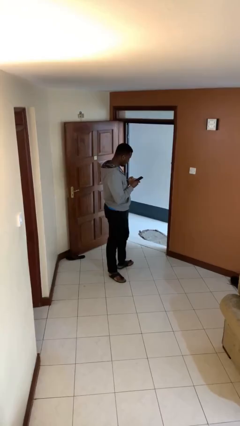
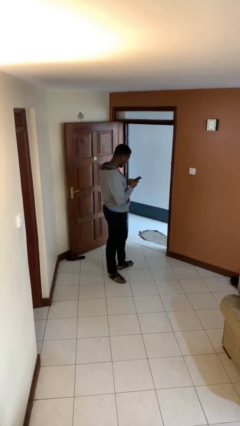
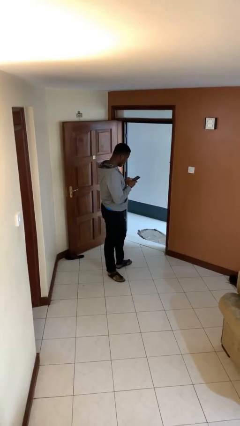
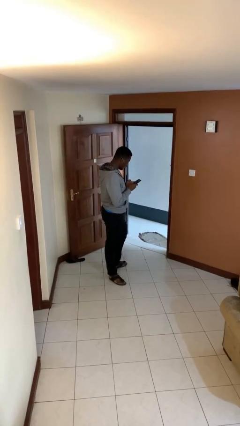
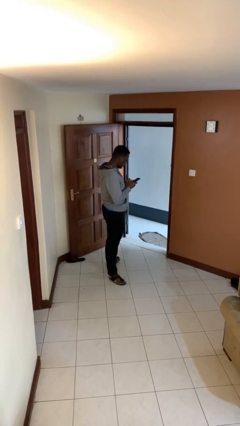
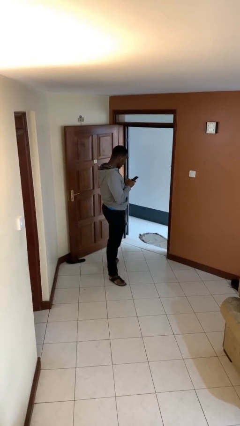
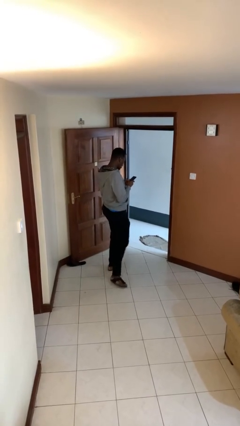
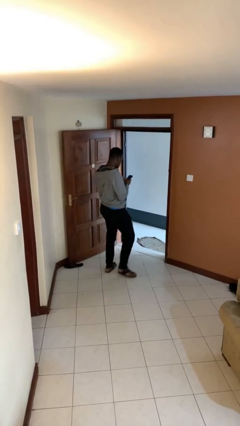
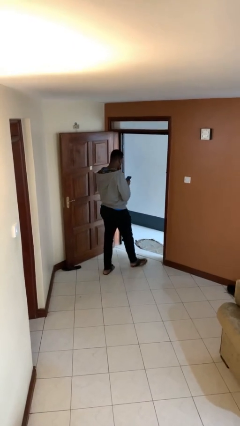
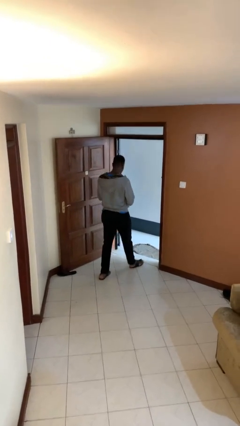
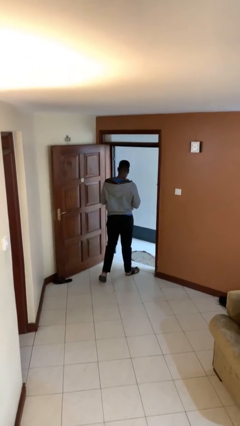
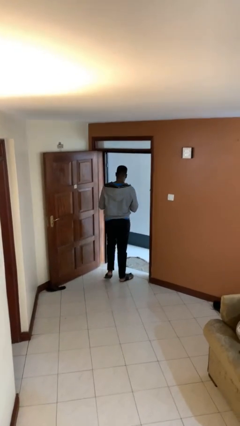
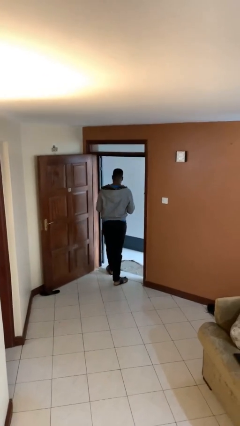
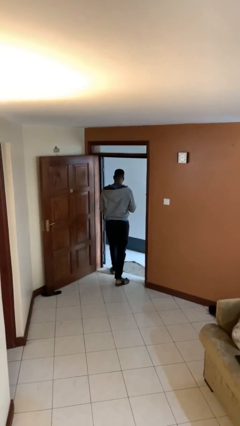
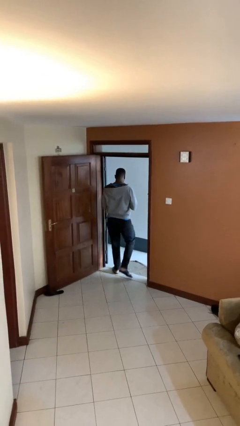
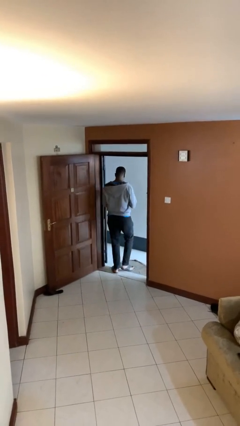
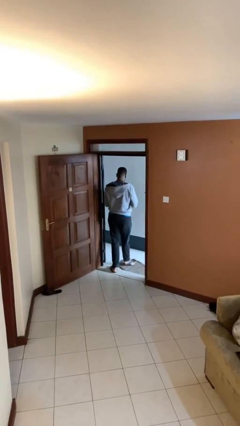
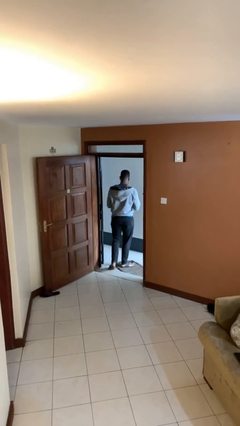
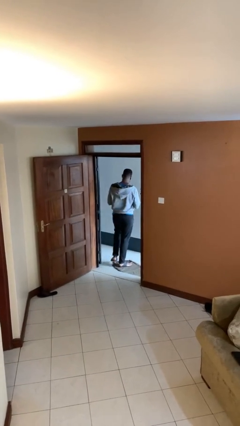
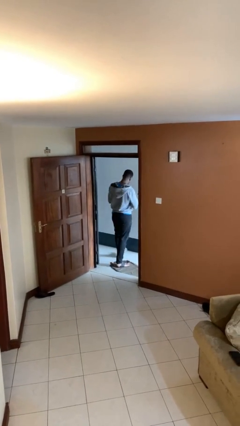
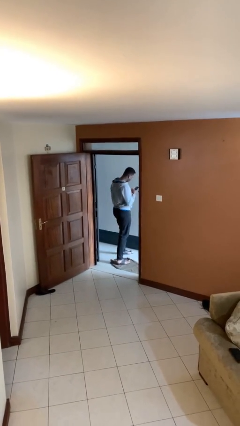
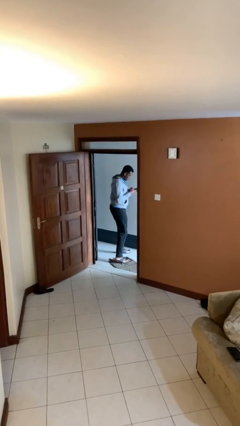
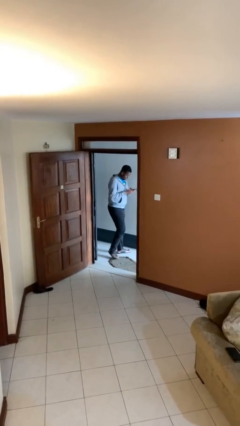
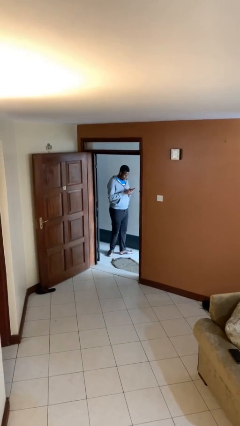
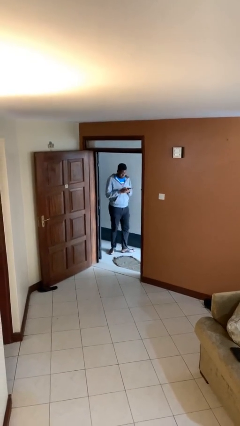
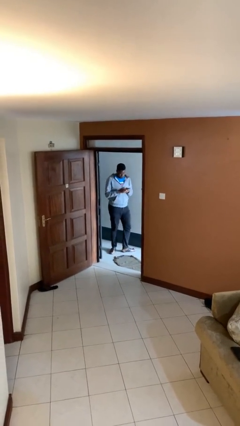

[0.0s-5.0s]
person exits scene through structure

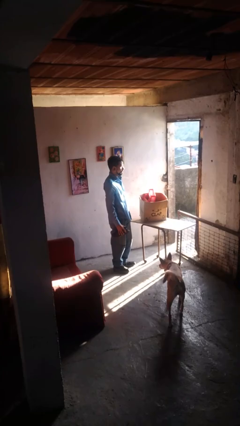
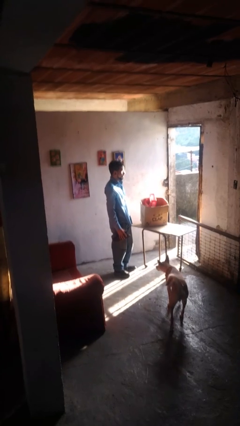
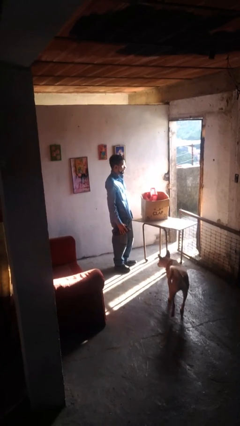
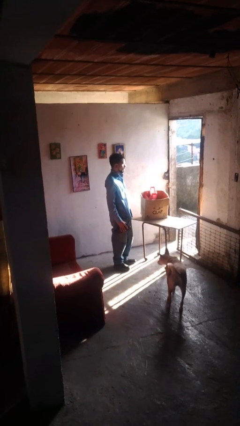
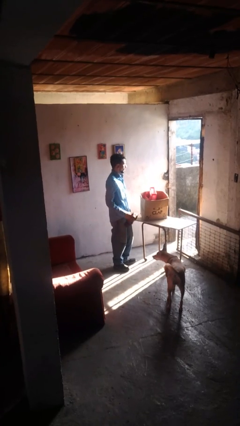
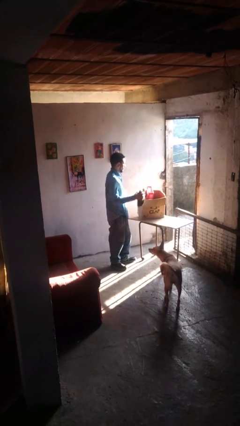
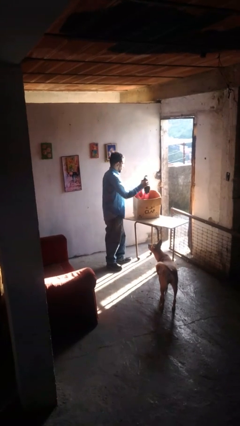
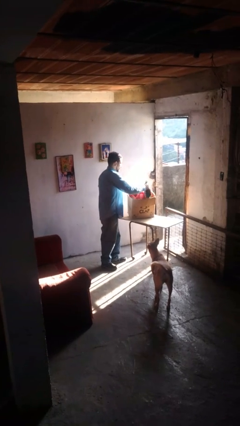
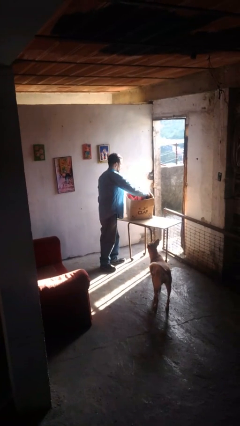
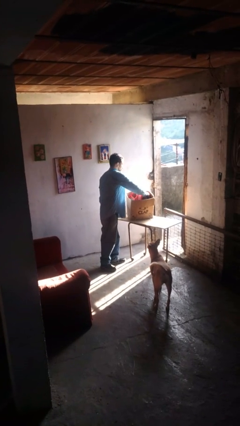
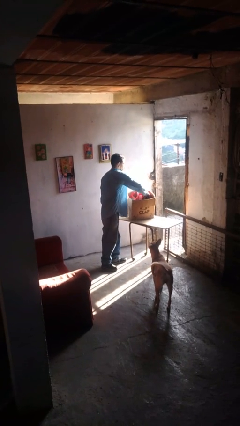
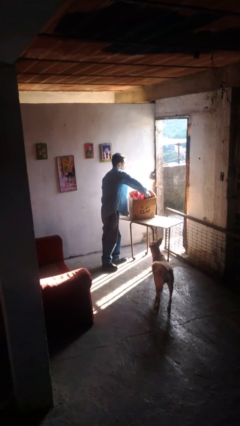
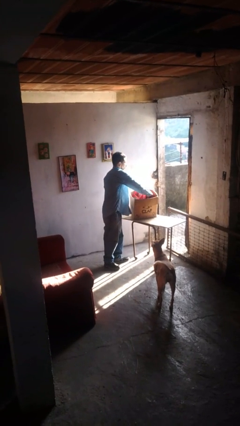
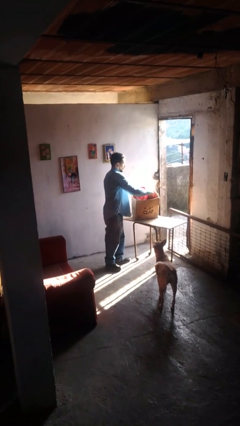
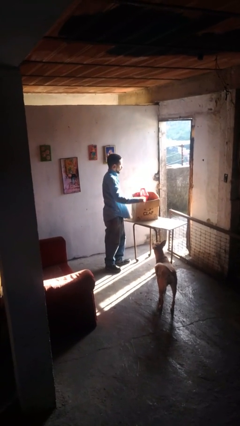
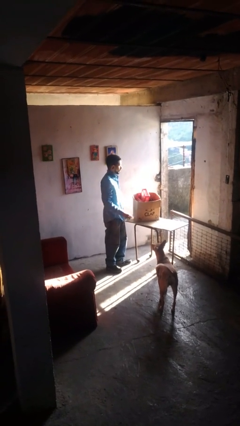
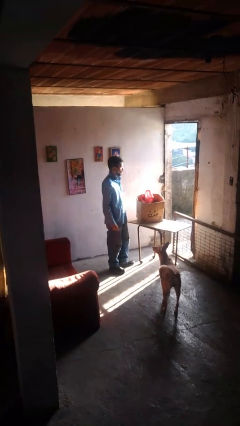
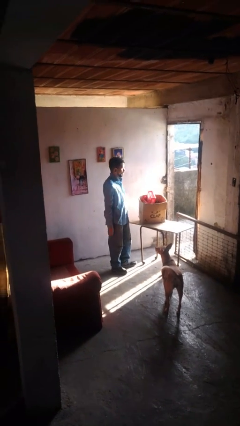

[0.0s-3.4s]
person puts object into box

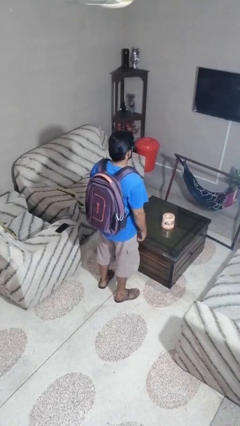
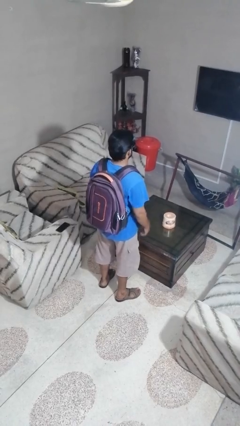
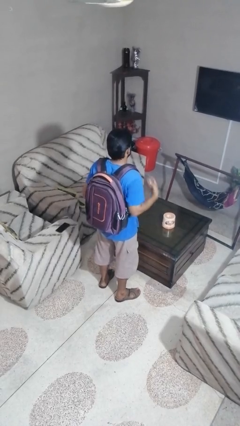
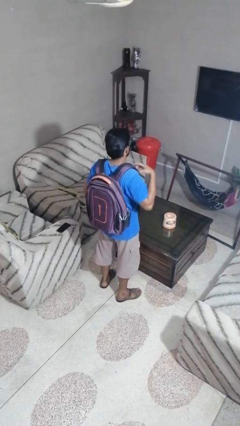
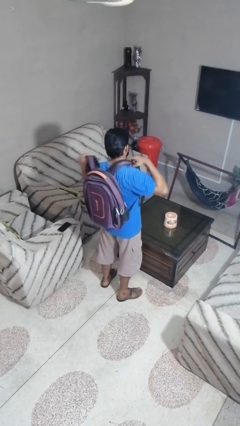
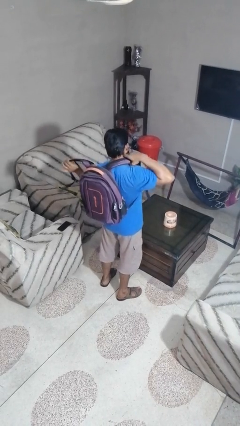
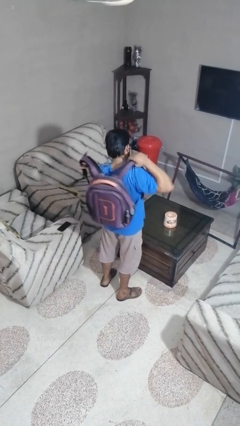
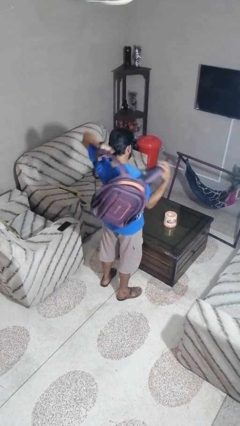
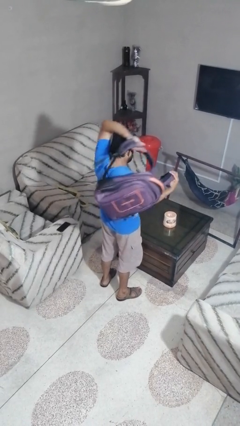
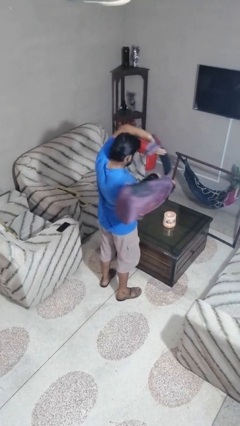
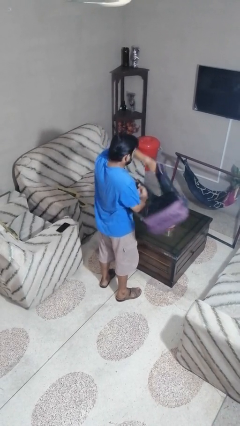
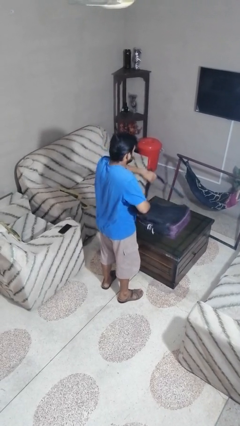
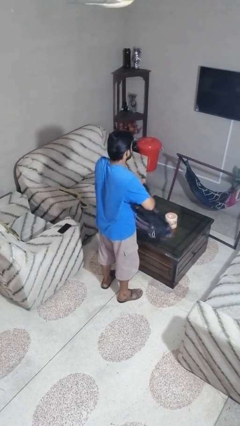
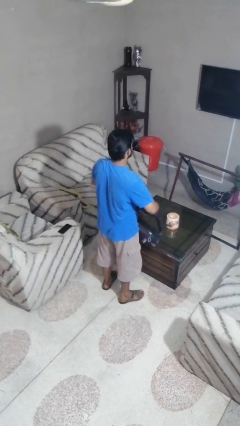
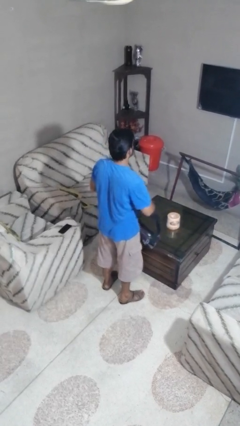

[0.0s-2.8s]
person takes off backpack

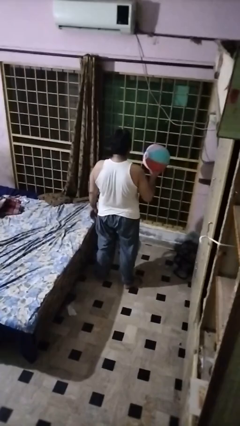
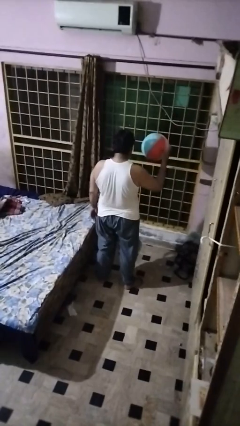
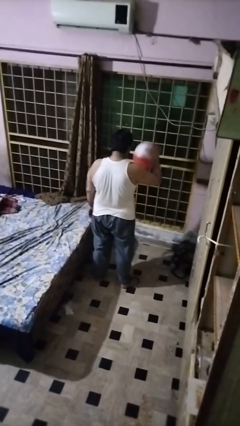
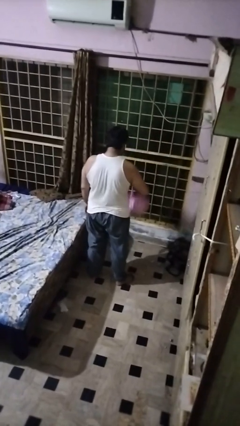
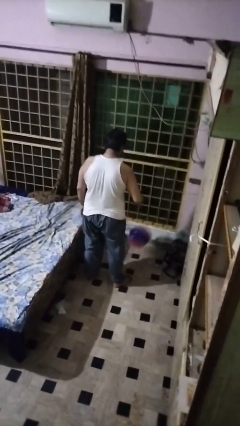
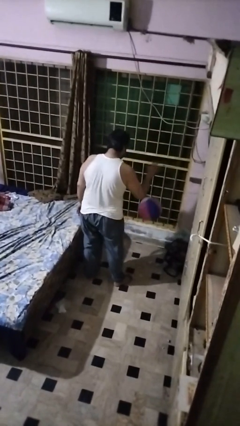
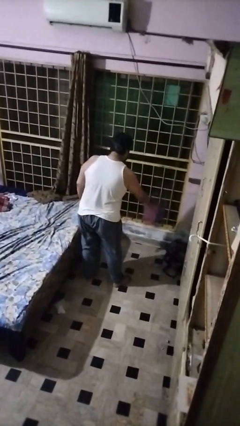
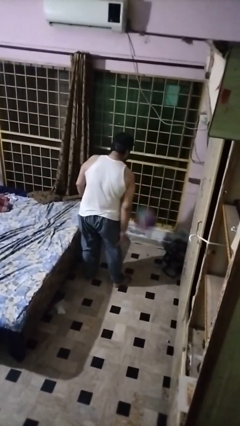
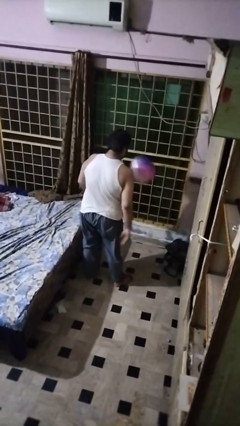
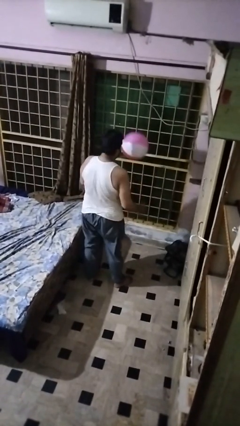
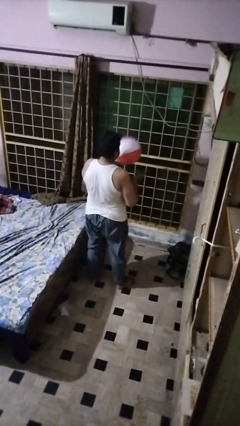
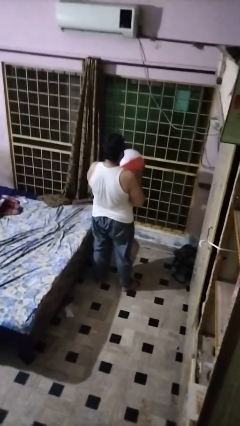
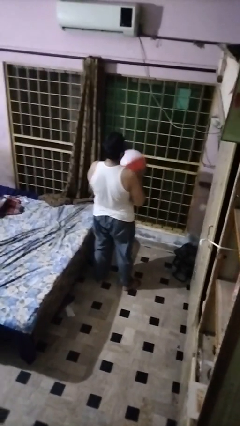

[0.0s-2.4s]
person bounces ball on floor

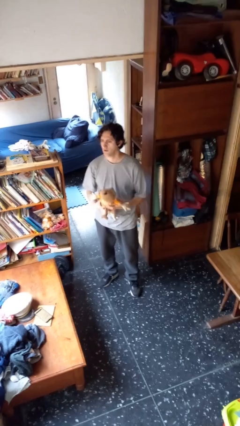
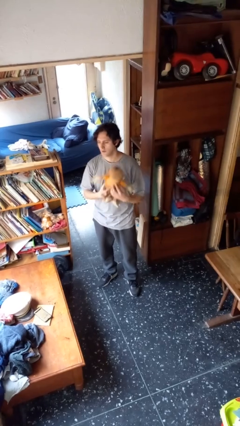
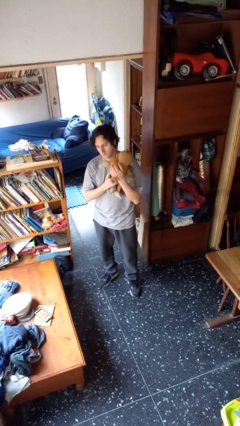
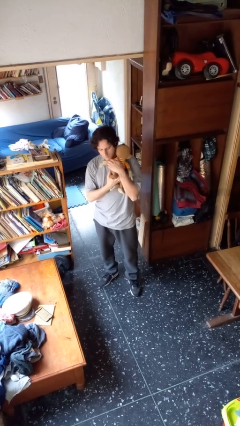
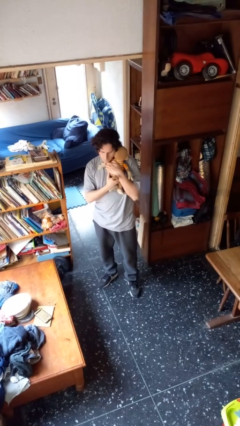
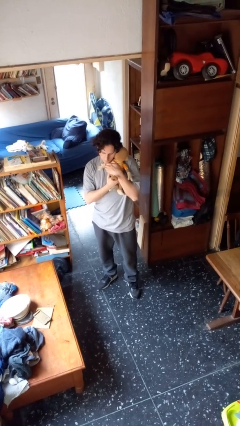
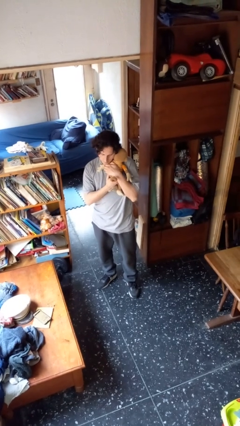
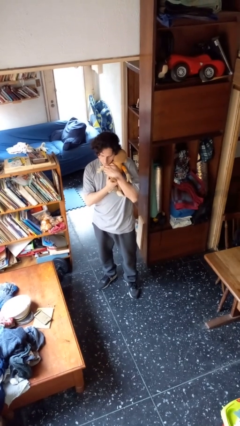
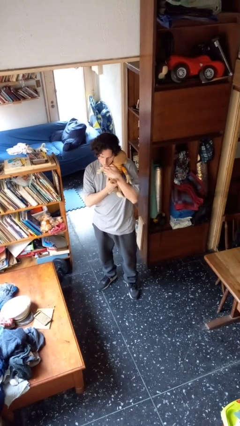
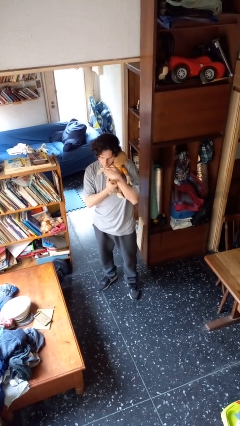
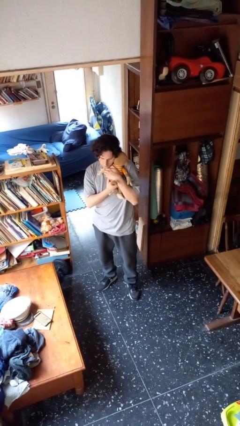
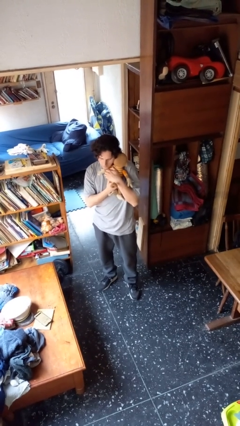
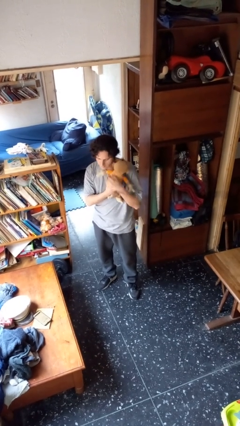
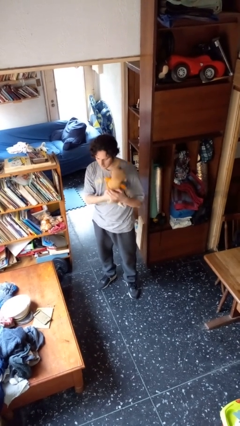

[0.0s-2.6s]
person hugs stuffed animal

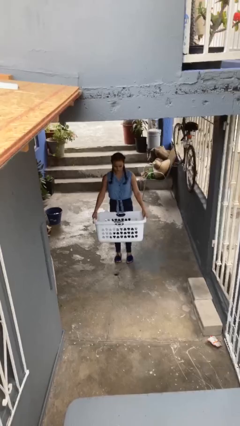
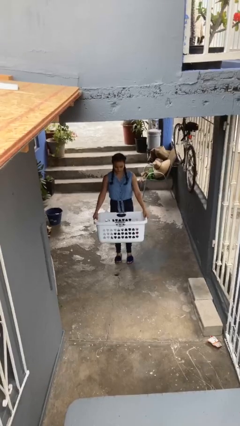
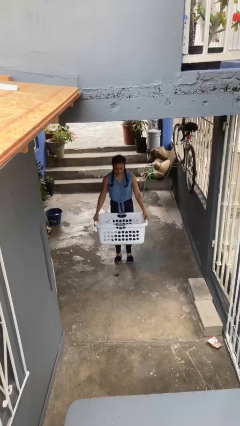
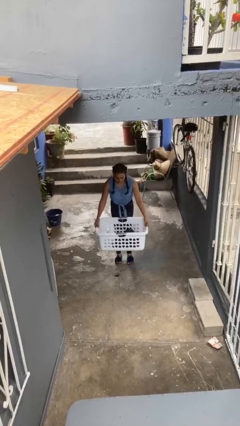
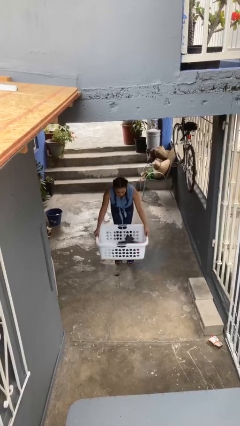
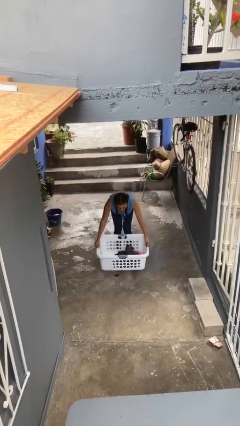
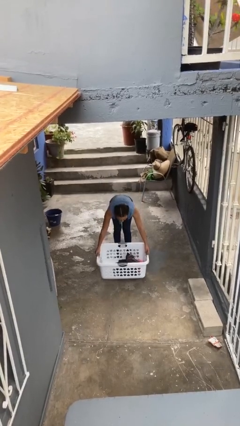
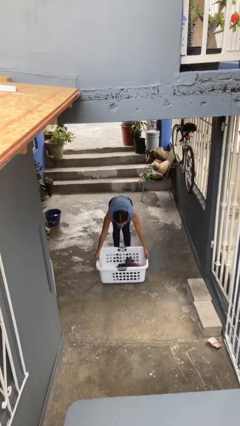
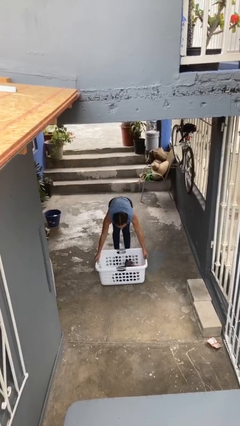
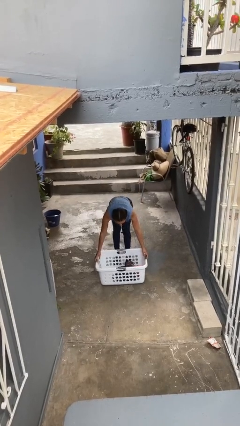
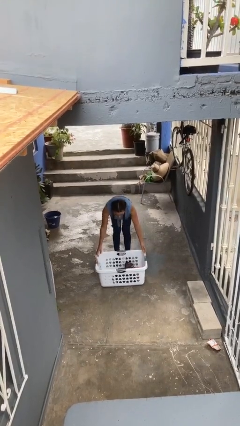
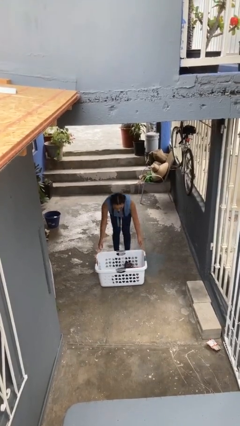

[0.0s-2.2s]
person puts down object on floor
